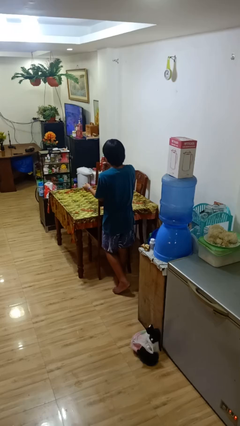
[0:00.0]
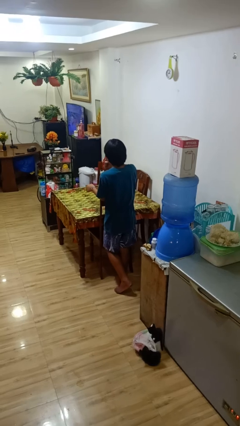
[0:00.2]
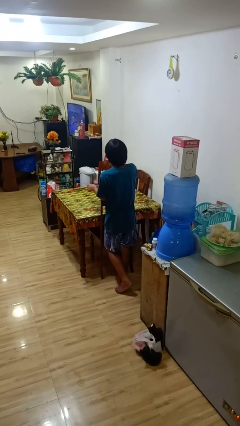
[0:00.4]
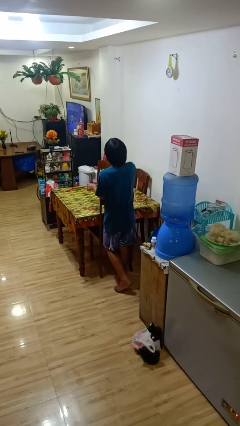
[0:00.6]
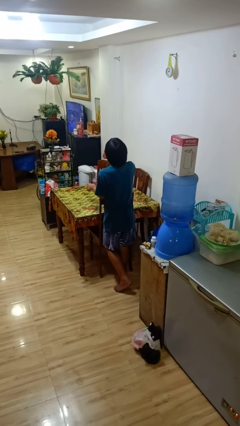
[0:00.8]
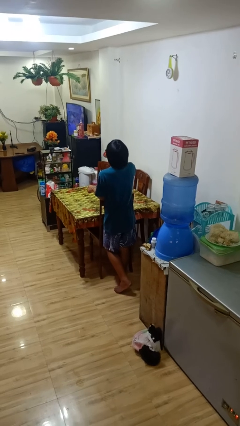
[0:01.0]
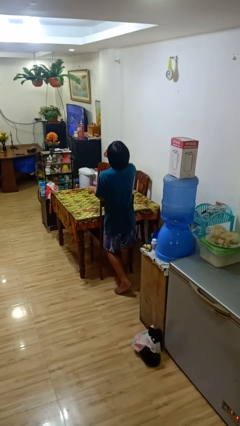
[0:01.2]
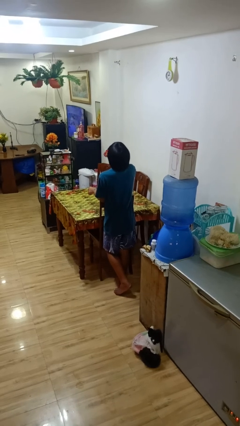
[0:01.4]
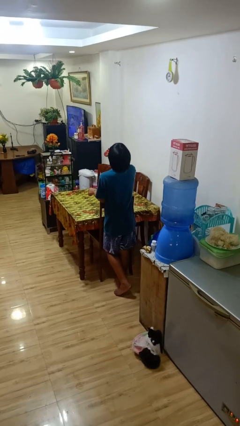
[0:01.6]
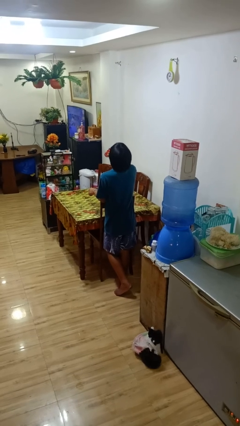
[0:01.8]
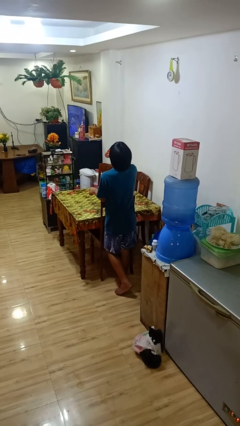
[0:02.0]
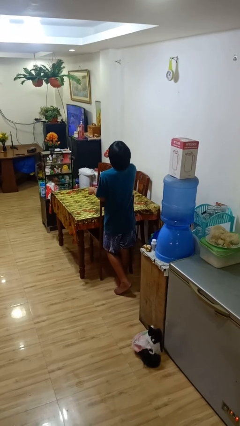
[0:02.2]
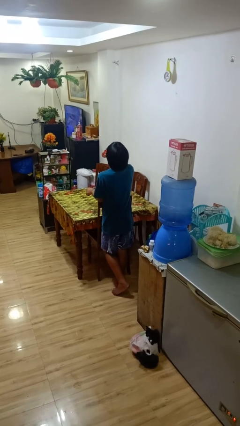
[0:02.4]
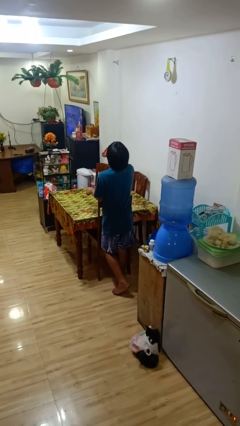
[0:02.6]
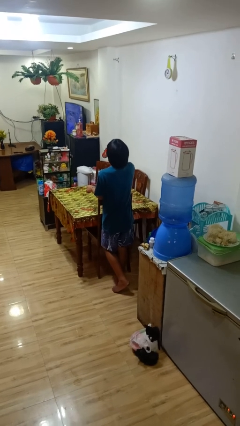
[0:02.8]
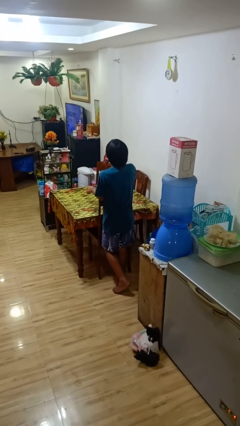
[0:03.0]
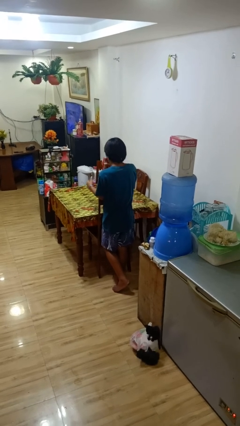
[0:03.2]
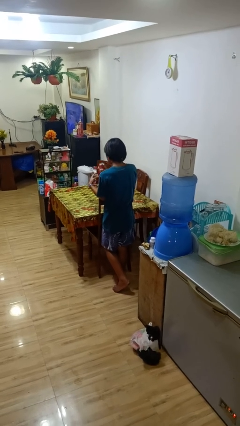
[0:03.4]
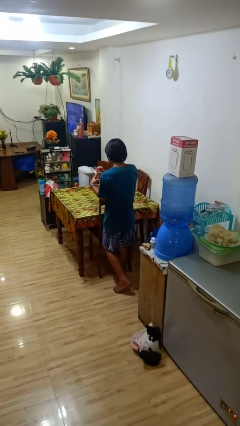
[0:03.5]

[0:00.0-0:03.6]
person drinks from beverage can

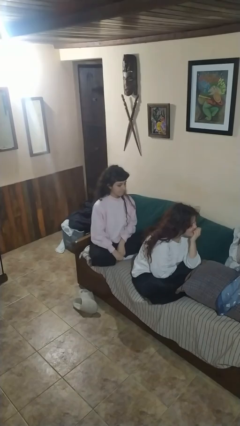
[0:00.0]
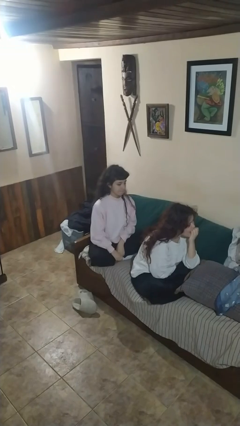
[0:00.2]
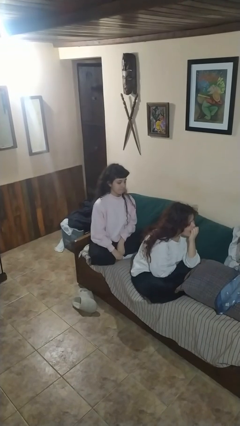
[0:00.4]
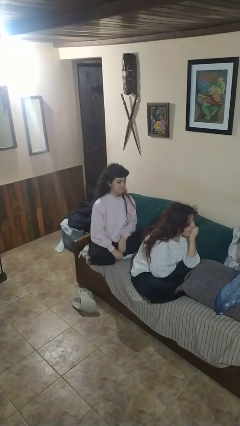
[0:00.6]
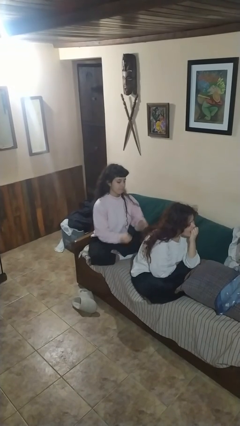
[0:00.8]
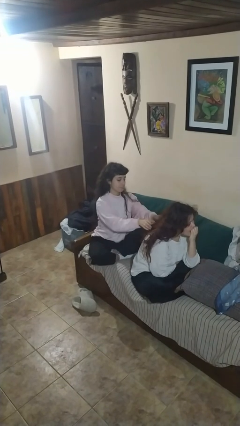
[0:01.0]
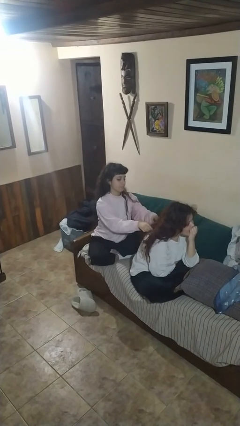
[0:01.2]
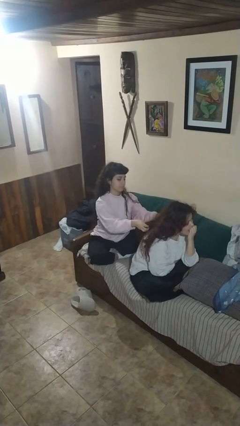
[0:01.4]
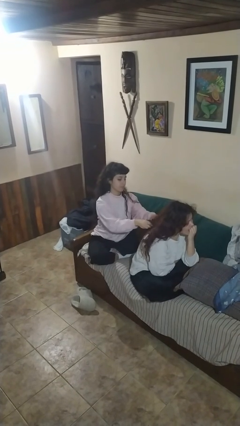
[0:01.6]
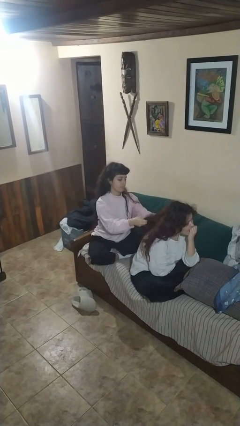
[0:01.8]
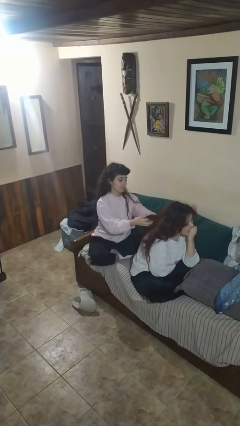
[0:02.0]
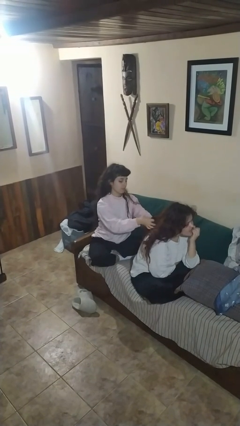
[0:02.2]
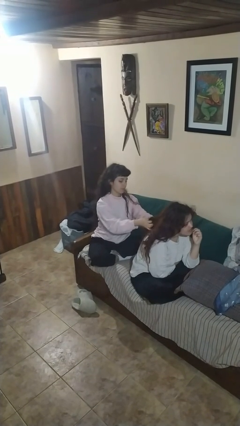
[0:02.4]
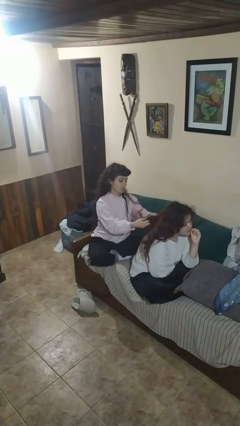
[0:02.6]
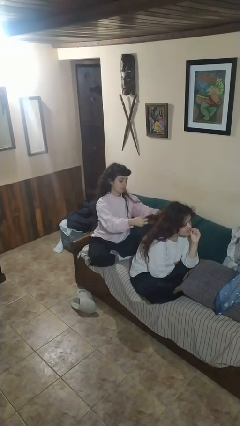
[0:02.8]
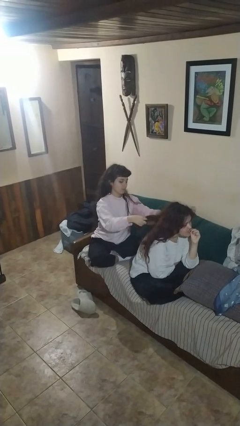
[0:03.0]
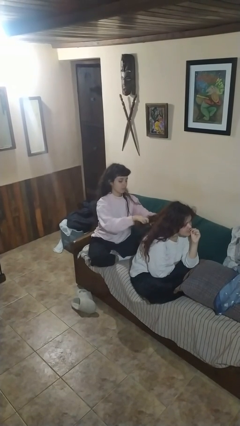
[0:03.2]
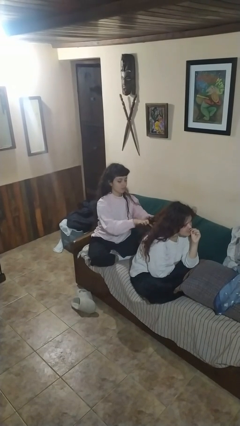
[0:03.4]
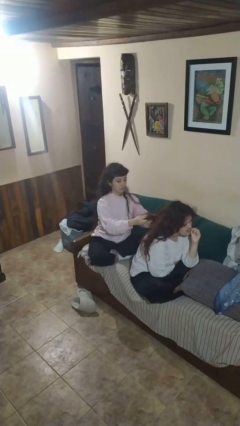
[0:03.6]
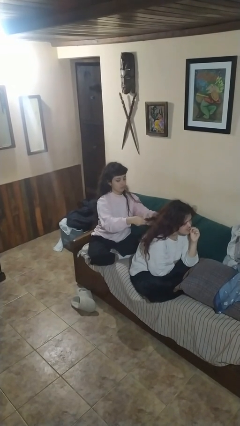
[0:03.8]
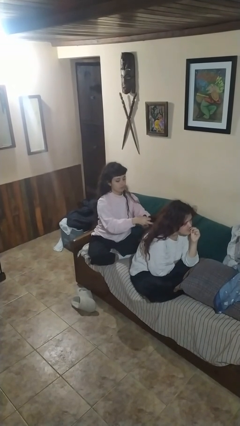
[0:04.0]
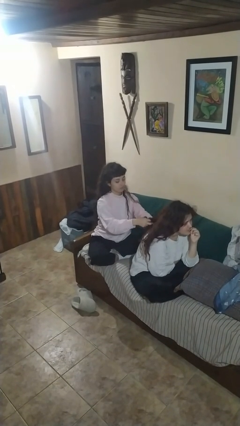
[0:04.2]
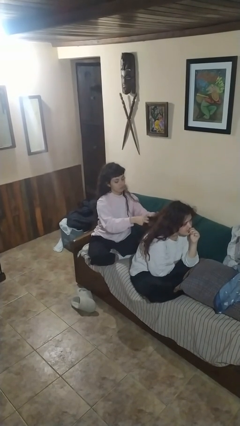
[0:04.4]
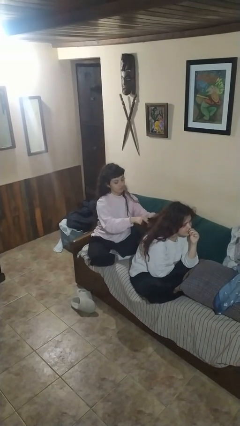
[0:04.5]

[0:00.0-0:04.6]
person braids hair of person

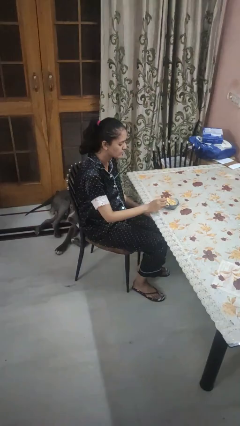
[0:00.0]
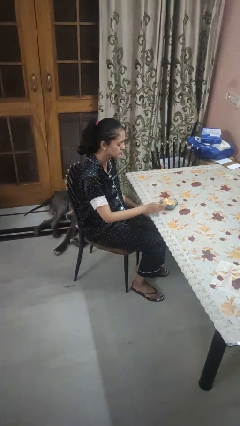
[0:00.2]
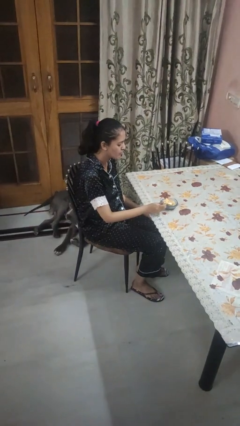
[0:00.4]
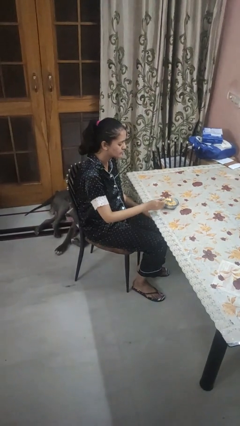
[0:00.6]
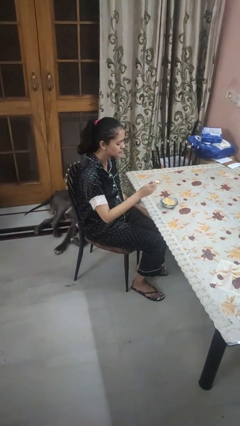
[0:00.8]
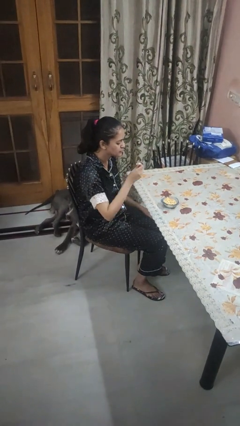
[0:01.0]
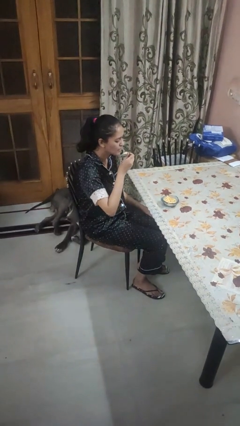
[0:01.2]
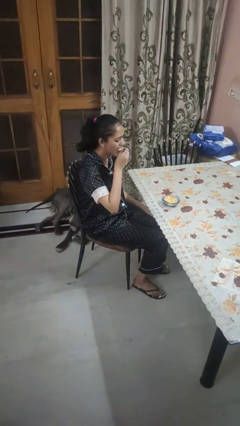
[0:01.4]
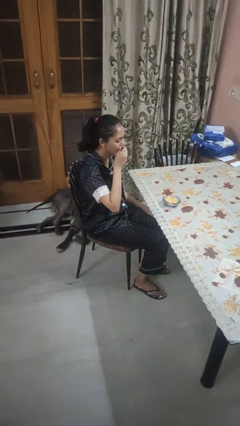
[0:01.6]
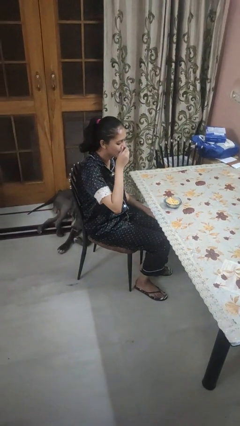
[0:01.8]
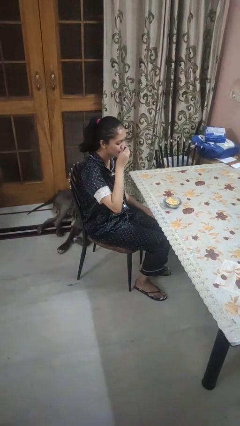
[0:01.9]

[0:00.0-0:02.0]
person eats with utensil

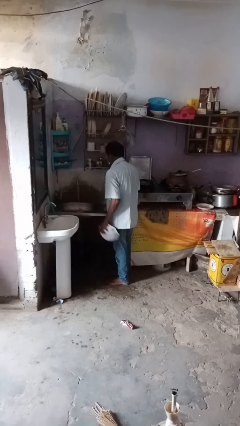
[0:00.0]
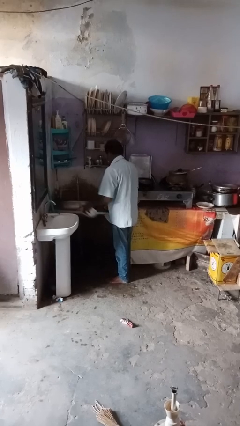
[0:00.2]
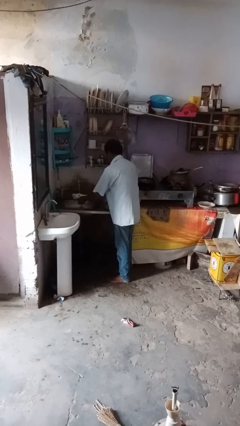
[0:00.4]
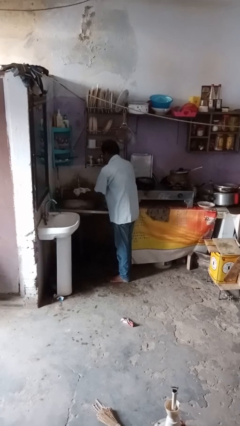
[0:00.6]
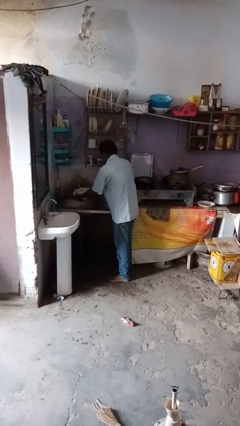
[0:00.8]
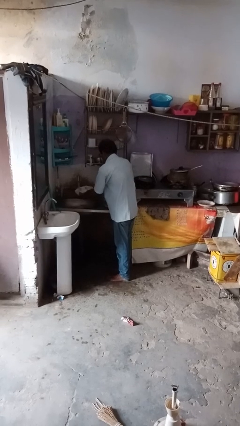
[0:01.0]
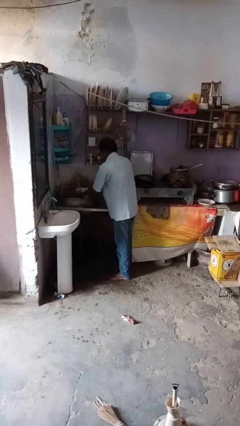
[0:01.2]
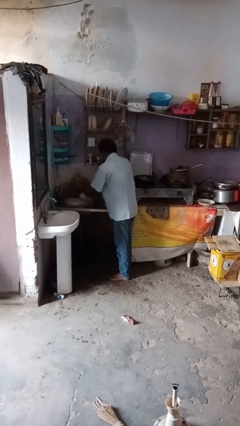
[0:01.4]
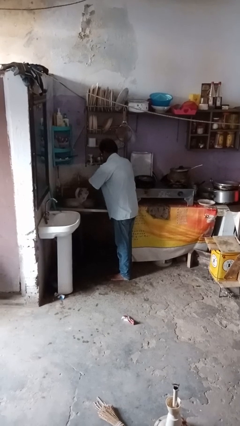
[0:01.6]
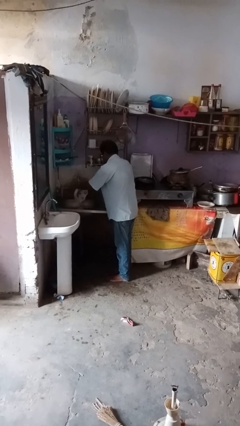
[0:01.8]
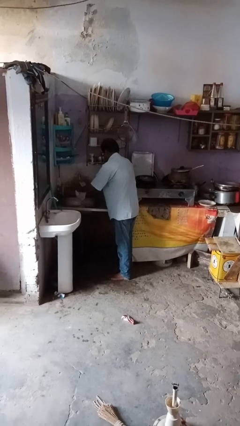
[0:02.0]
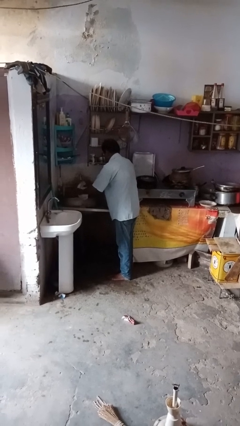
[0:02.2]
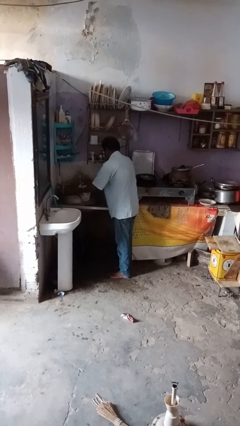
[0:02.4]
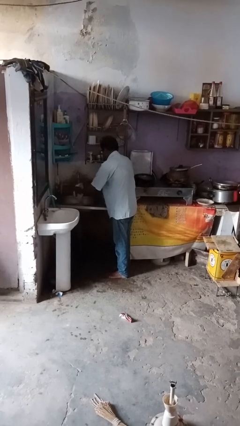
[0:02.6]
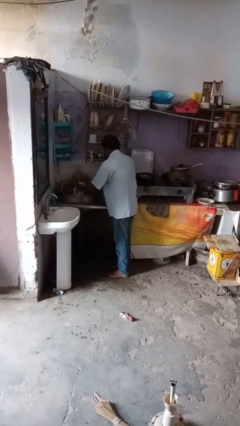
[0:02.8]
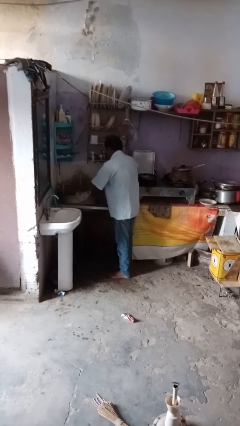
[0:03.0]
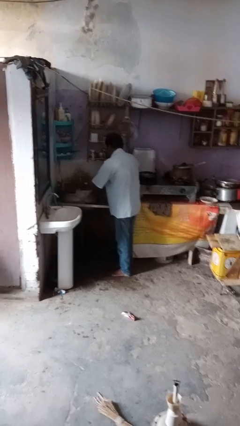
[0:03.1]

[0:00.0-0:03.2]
person washes dish

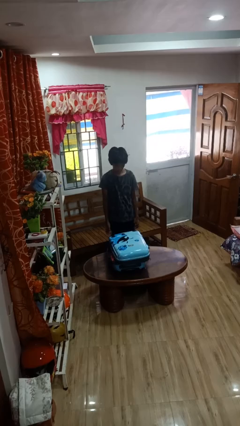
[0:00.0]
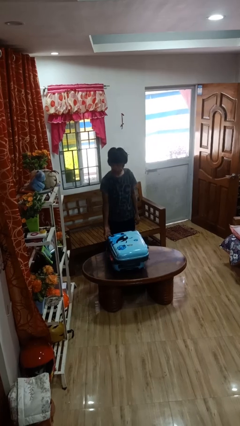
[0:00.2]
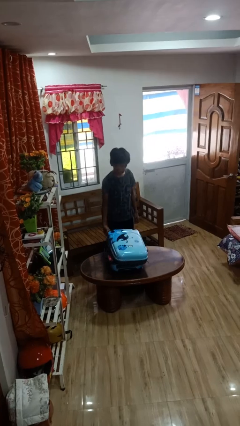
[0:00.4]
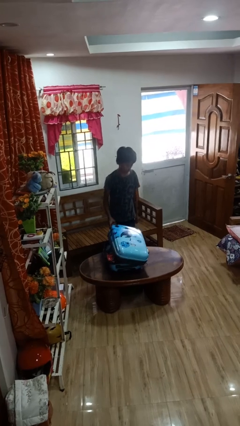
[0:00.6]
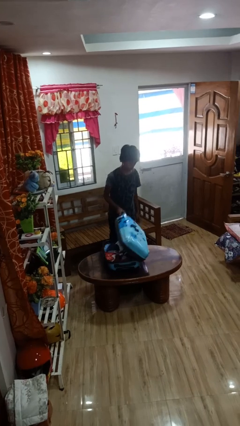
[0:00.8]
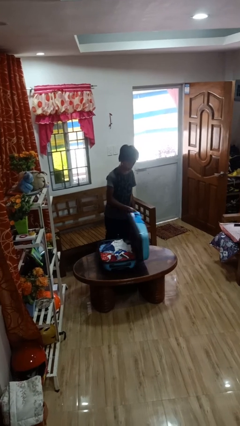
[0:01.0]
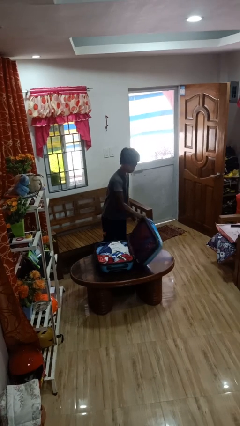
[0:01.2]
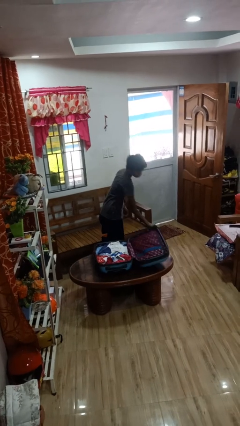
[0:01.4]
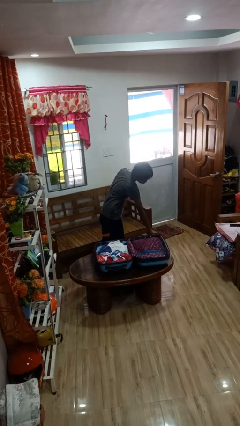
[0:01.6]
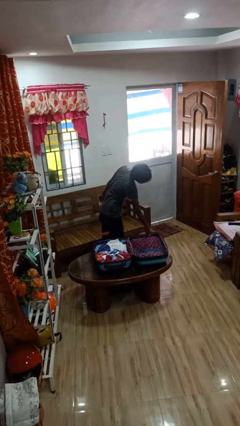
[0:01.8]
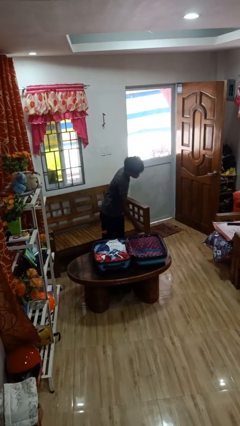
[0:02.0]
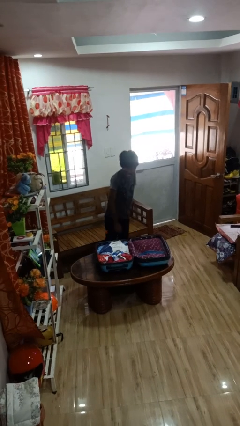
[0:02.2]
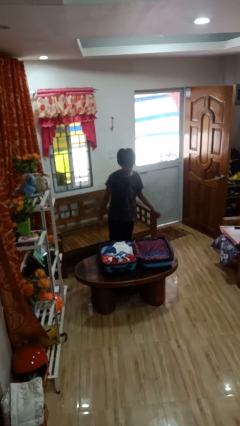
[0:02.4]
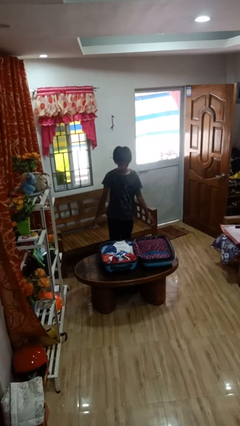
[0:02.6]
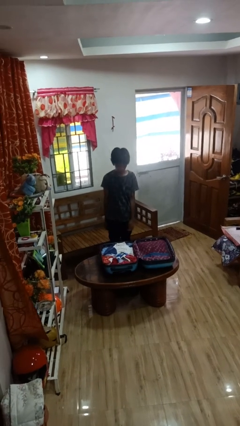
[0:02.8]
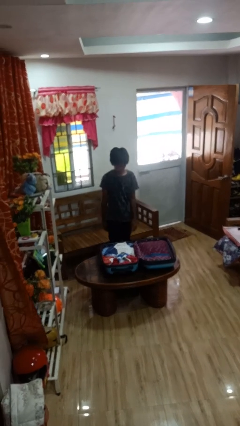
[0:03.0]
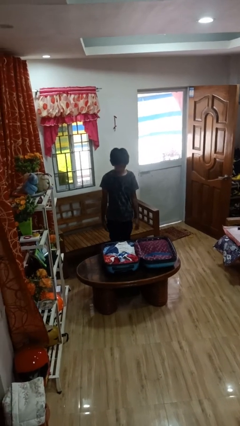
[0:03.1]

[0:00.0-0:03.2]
person opens suitcase

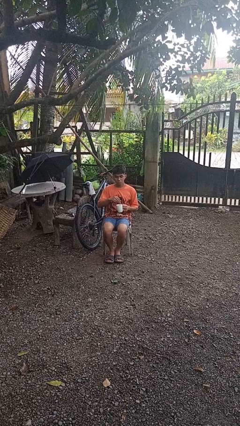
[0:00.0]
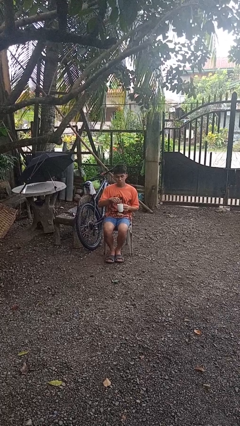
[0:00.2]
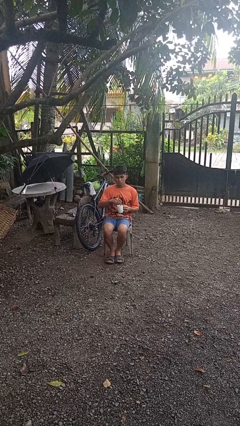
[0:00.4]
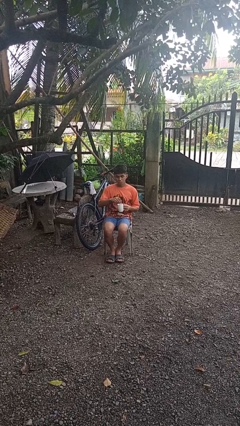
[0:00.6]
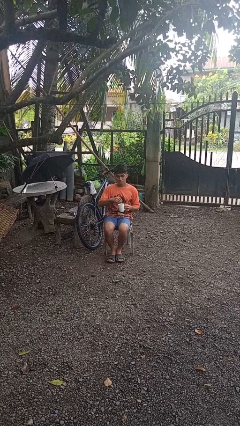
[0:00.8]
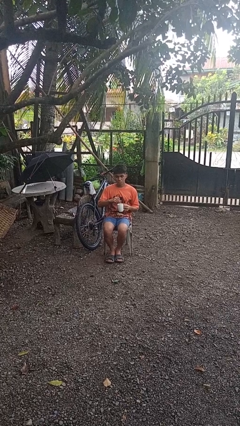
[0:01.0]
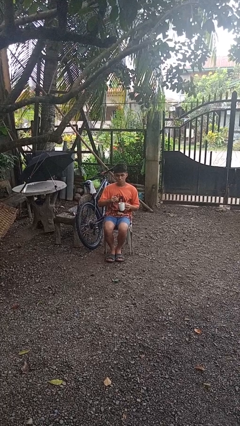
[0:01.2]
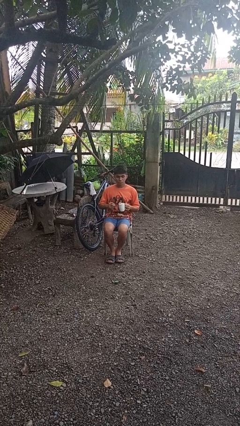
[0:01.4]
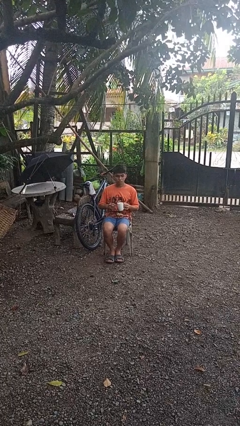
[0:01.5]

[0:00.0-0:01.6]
person stirs mug
